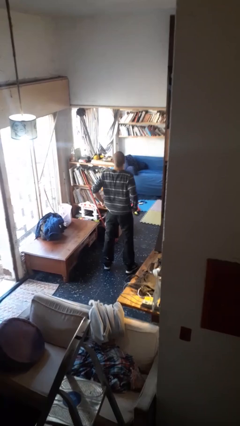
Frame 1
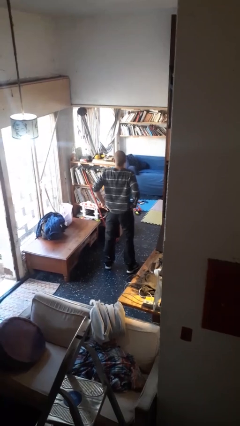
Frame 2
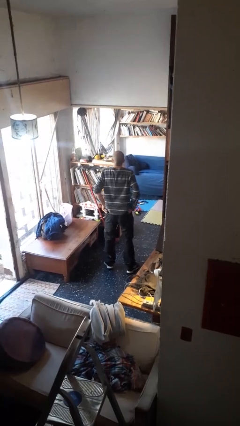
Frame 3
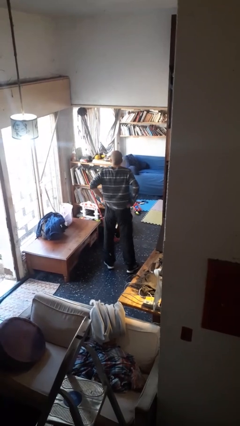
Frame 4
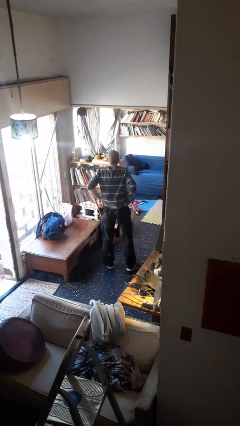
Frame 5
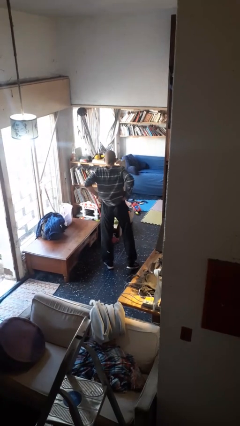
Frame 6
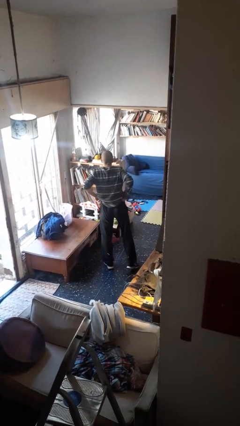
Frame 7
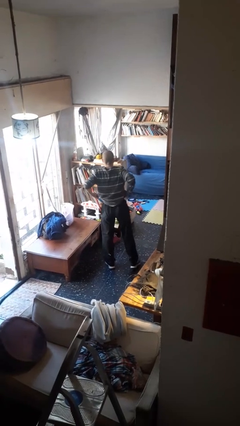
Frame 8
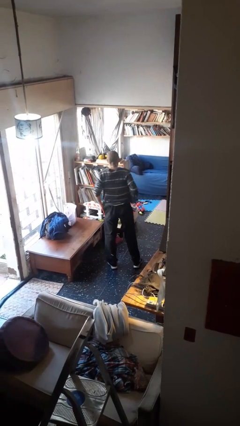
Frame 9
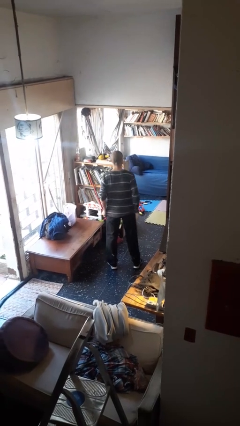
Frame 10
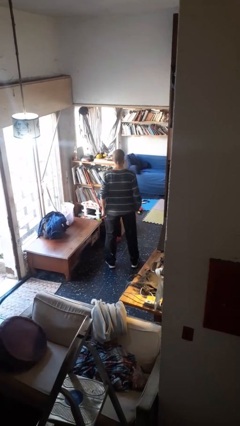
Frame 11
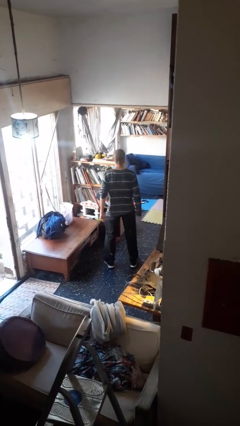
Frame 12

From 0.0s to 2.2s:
person hikes up pants

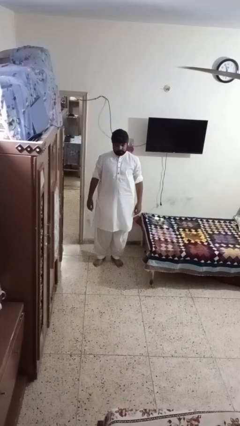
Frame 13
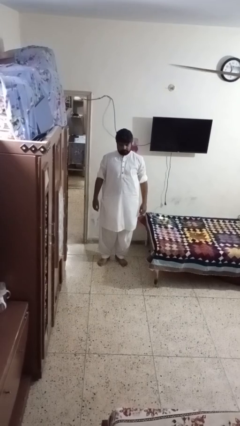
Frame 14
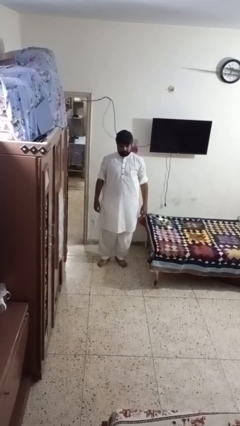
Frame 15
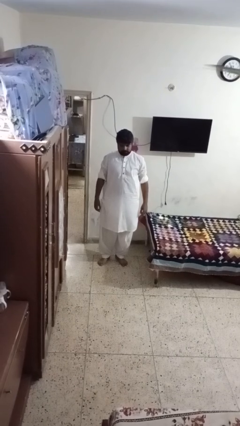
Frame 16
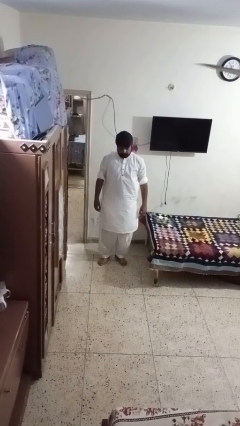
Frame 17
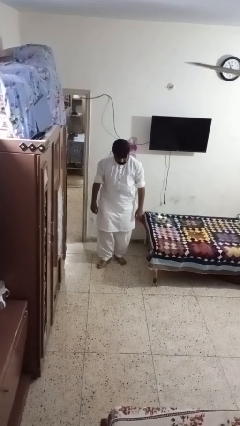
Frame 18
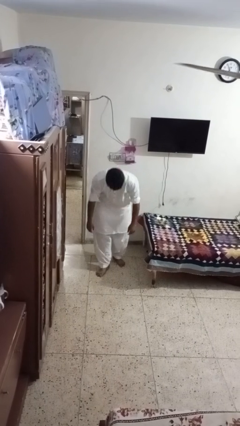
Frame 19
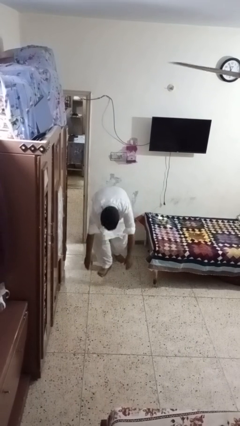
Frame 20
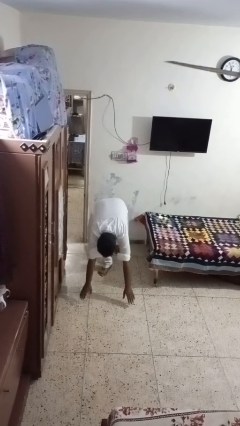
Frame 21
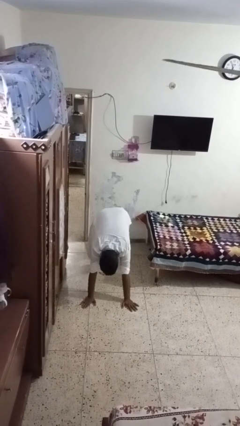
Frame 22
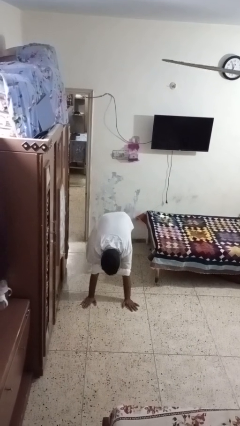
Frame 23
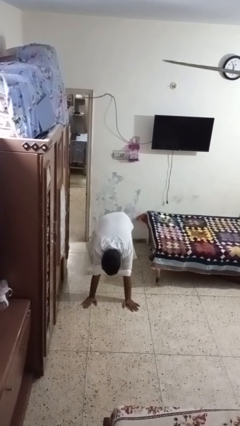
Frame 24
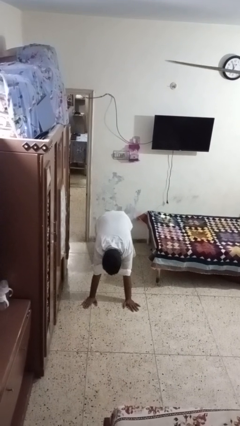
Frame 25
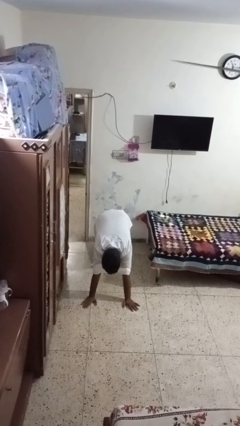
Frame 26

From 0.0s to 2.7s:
person exercises with plank

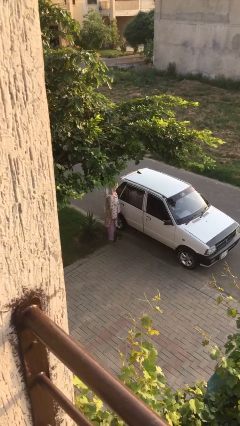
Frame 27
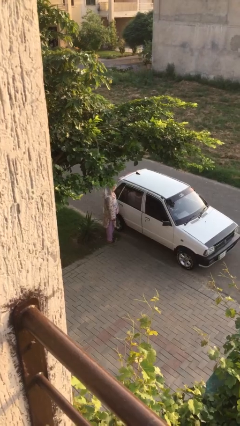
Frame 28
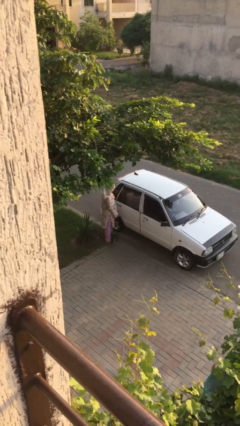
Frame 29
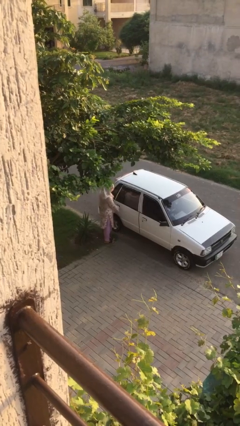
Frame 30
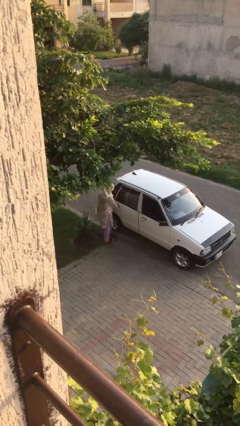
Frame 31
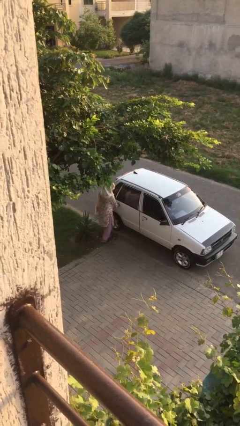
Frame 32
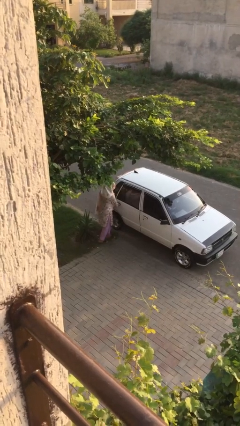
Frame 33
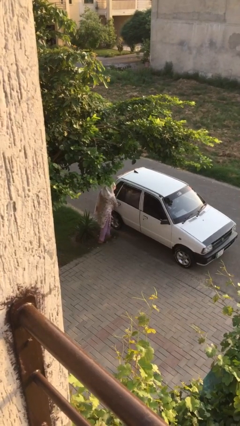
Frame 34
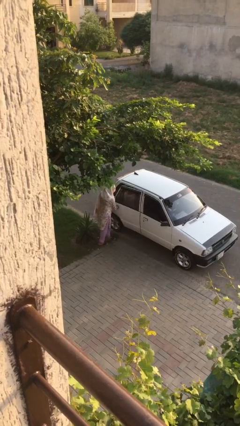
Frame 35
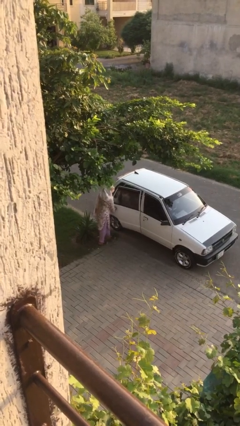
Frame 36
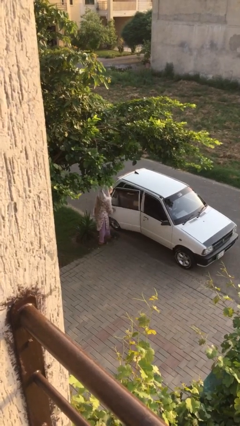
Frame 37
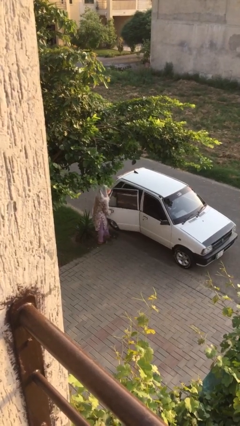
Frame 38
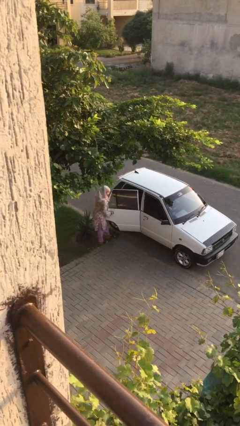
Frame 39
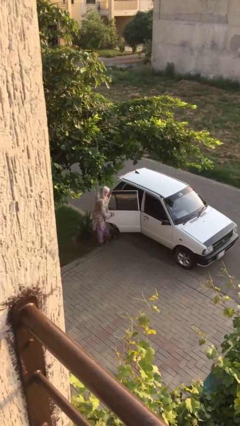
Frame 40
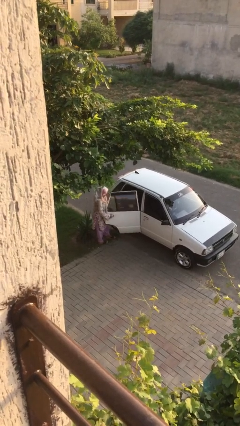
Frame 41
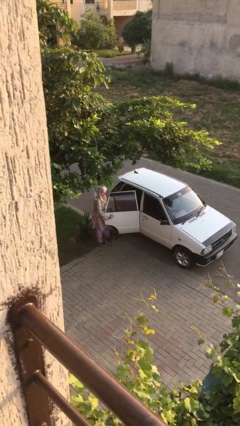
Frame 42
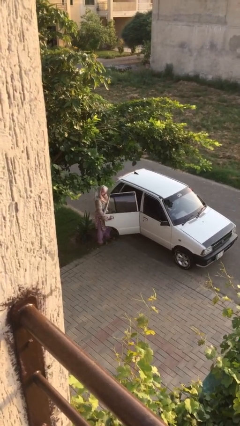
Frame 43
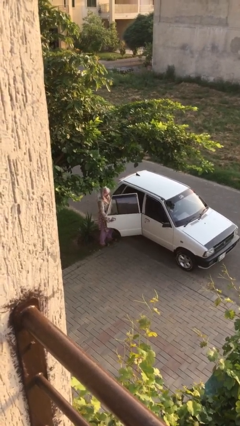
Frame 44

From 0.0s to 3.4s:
person opens car door

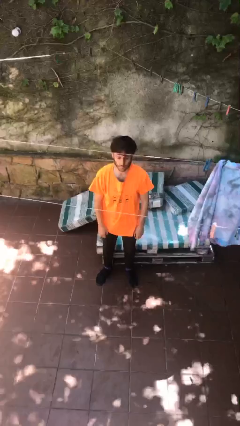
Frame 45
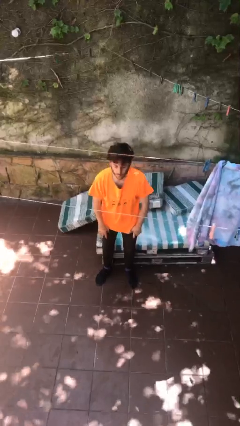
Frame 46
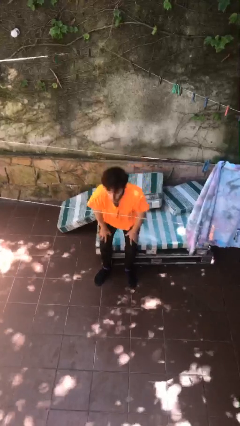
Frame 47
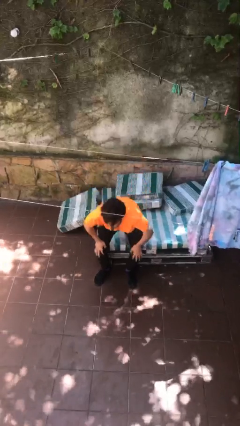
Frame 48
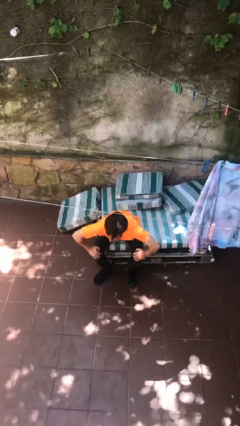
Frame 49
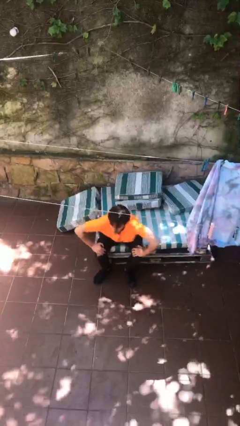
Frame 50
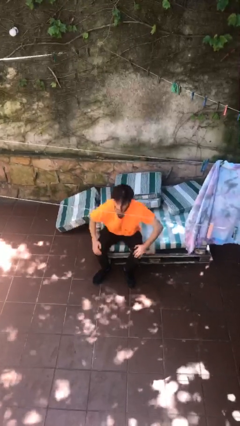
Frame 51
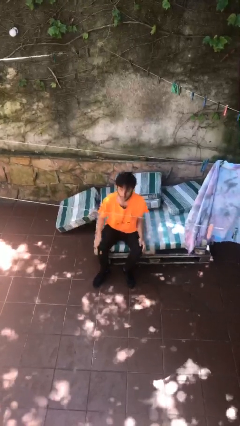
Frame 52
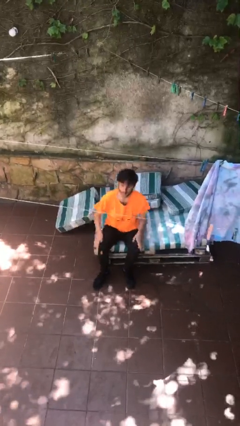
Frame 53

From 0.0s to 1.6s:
person sits down

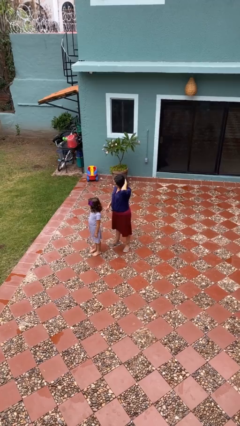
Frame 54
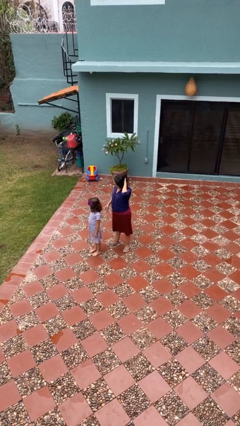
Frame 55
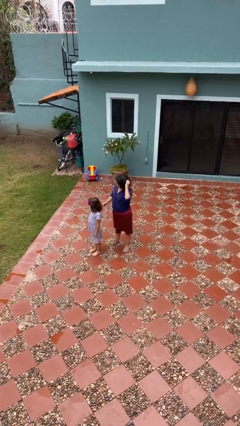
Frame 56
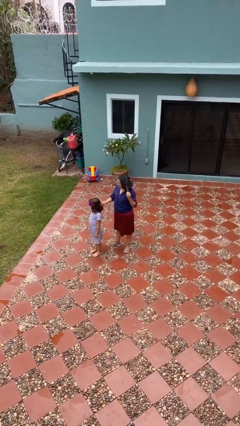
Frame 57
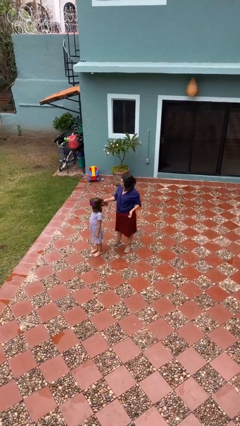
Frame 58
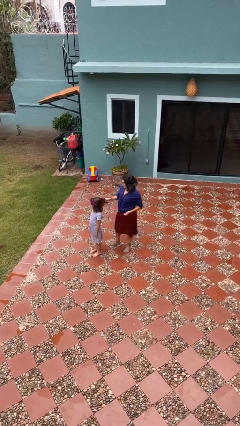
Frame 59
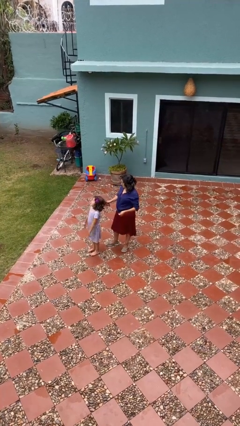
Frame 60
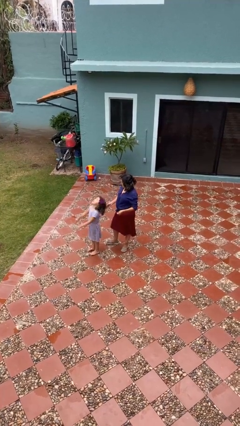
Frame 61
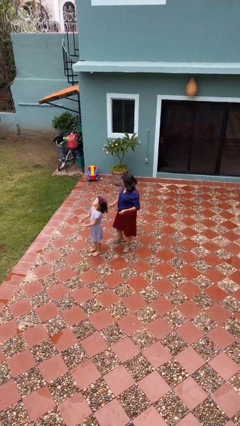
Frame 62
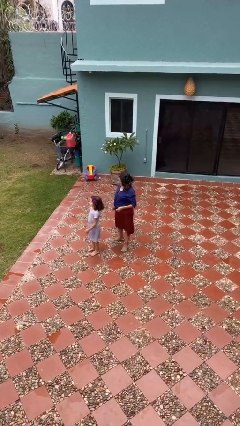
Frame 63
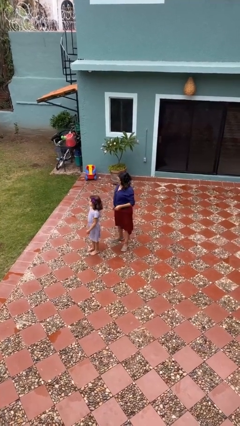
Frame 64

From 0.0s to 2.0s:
person grabs person by hair

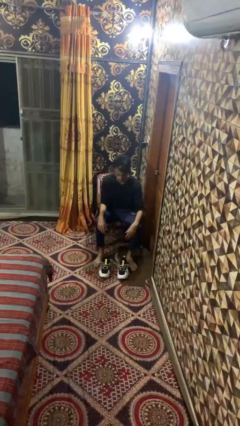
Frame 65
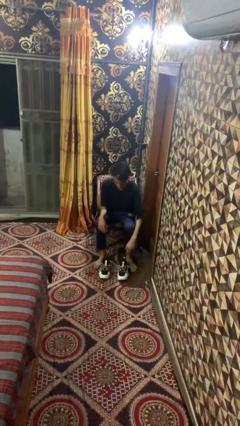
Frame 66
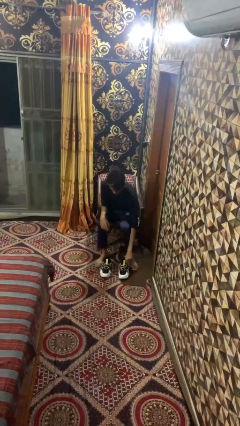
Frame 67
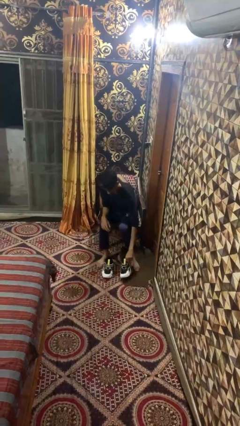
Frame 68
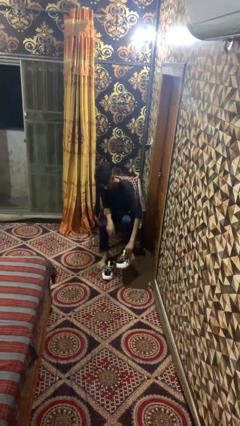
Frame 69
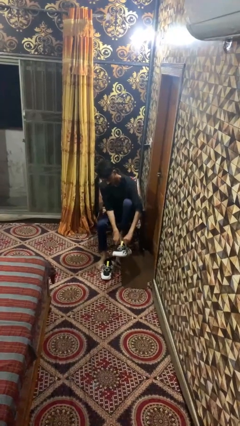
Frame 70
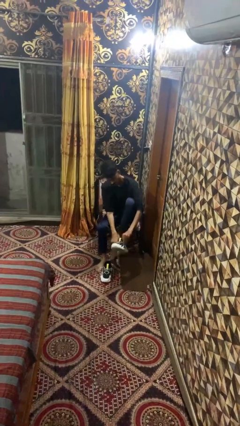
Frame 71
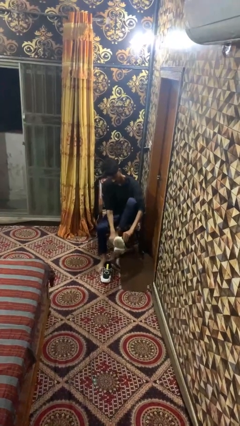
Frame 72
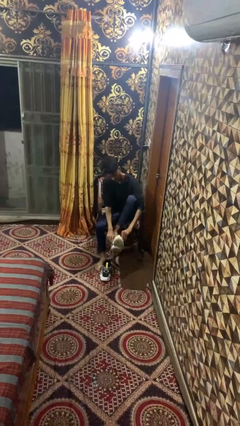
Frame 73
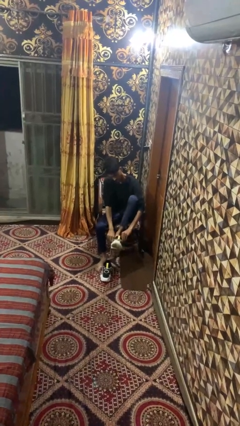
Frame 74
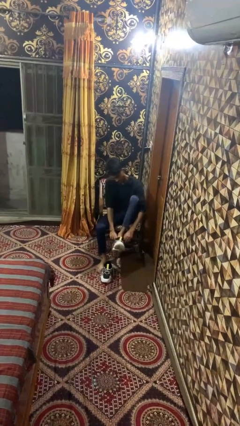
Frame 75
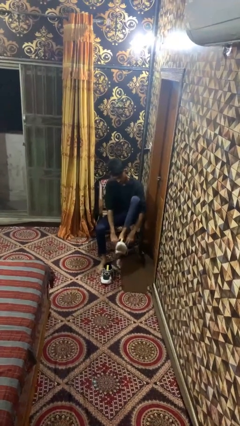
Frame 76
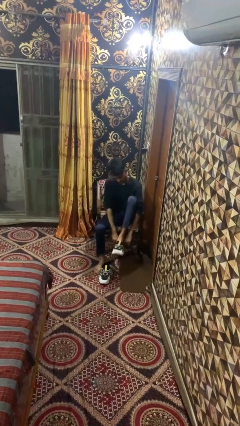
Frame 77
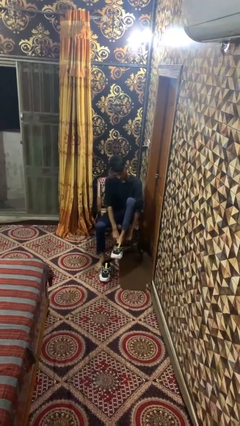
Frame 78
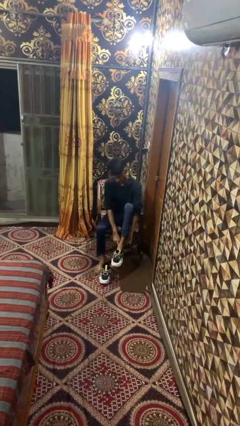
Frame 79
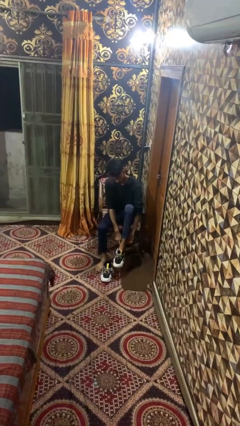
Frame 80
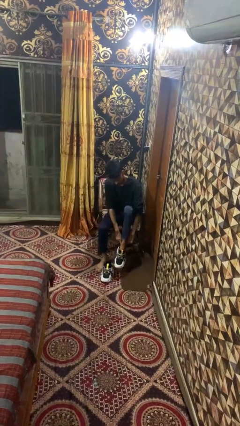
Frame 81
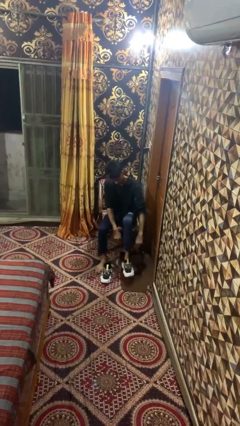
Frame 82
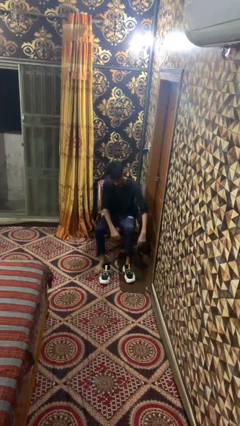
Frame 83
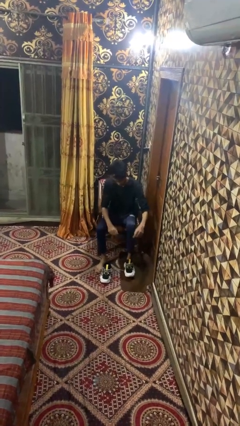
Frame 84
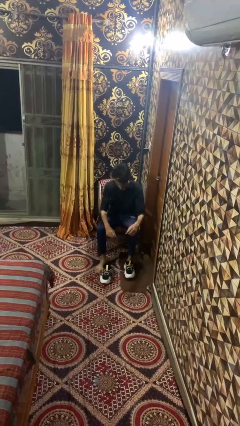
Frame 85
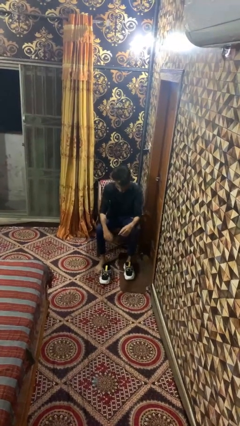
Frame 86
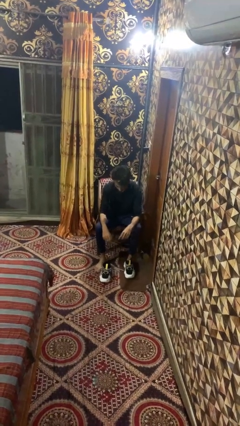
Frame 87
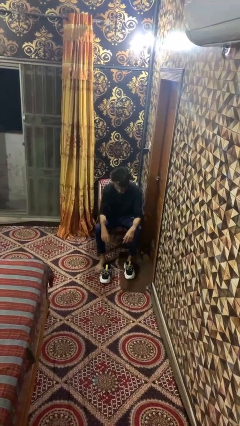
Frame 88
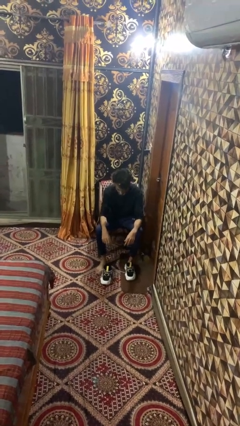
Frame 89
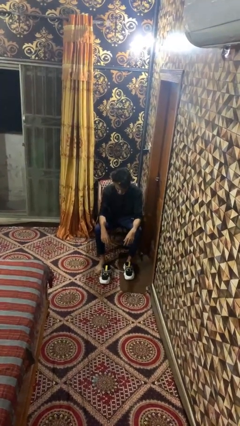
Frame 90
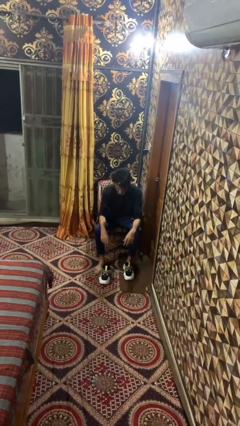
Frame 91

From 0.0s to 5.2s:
person puts on shoes

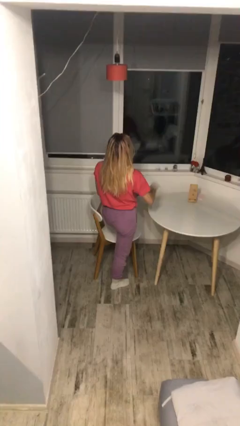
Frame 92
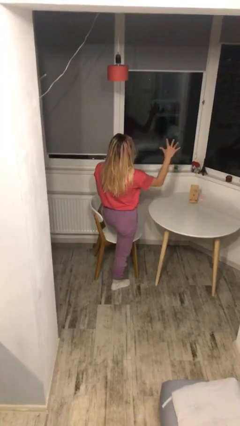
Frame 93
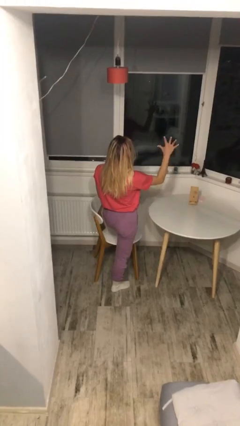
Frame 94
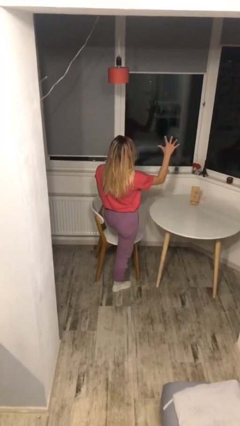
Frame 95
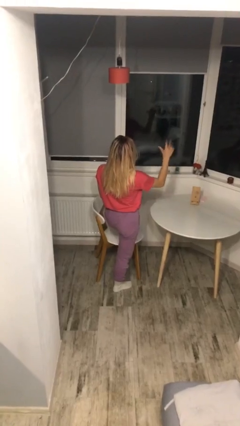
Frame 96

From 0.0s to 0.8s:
person gestures number five
